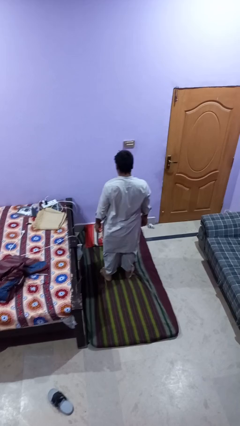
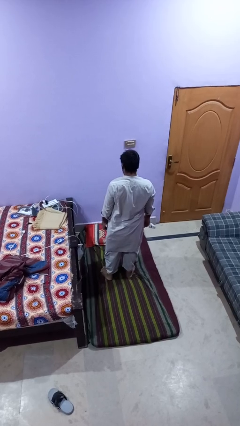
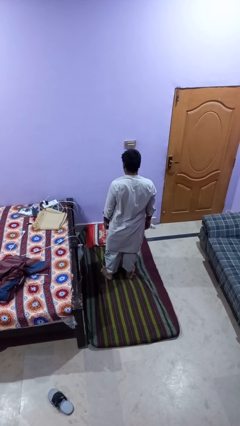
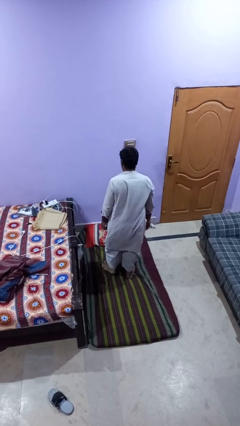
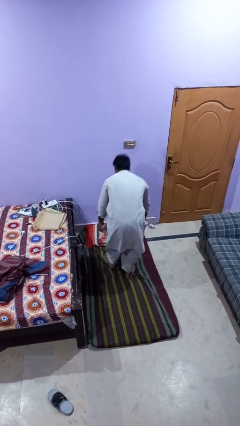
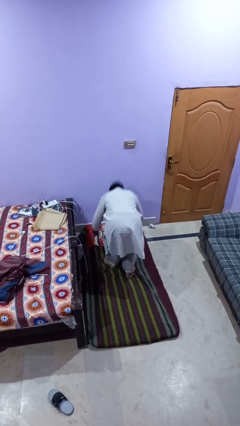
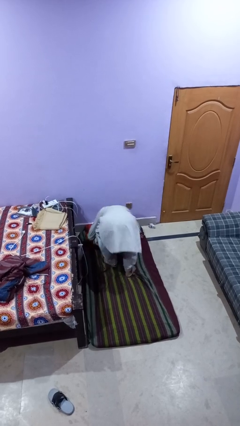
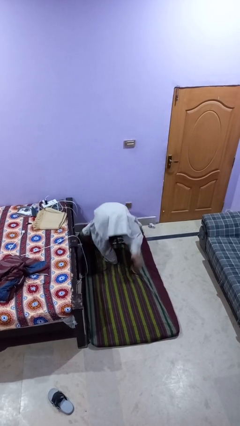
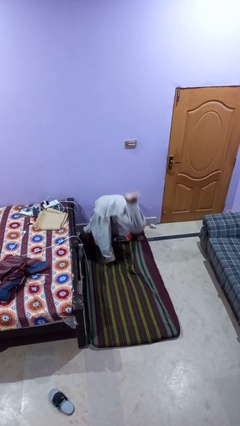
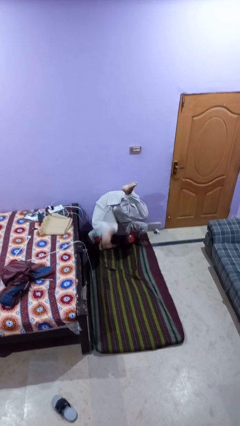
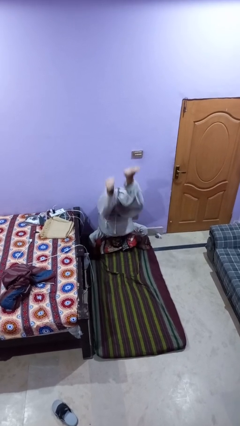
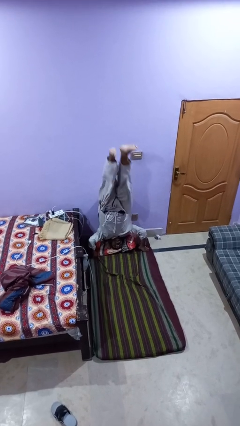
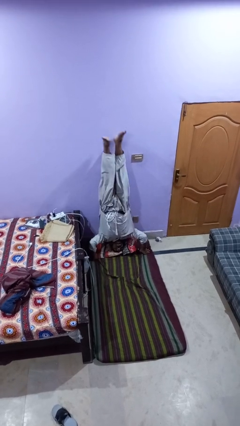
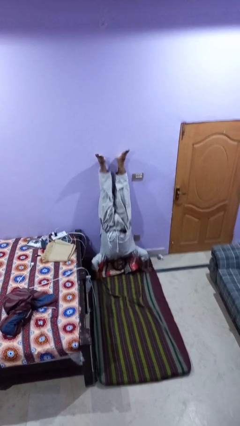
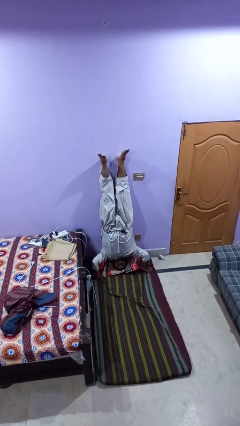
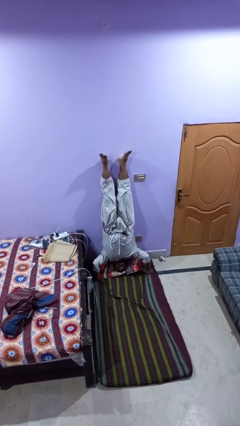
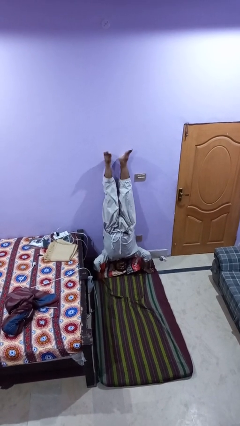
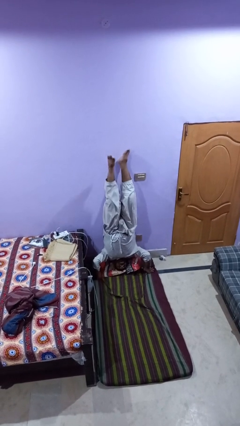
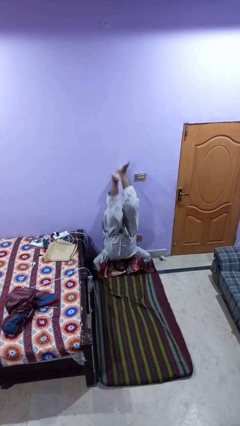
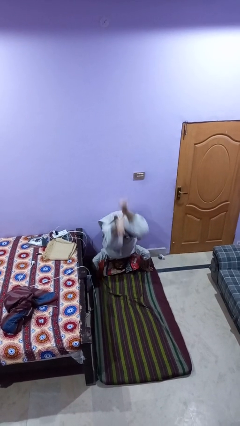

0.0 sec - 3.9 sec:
person handstand

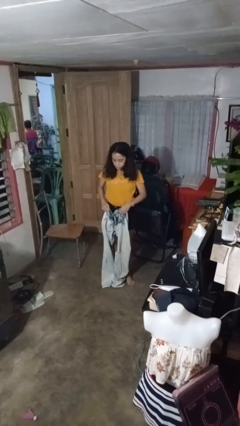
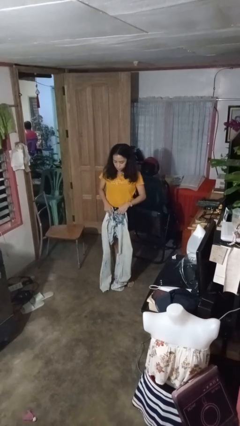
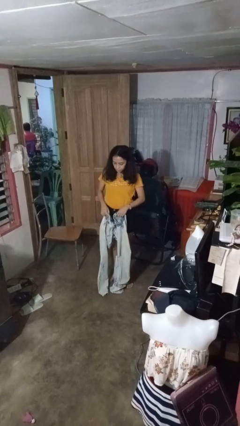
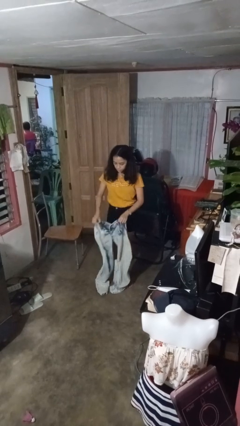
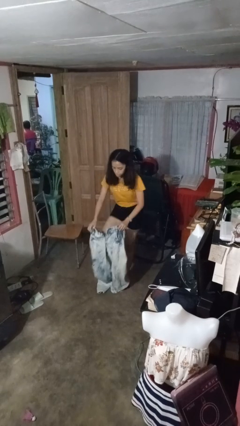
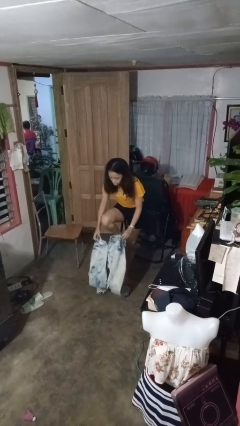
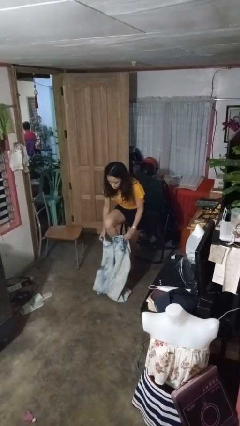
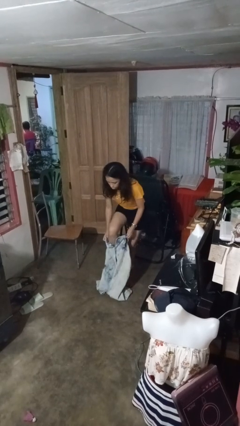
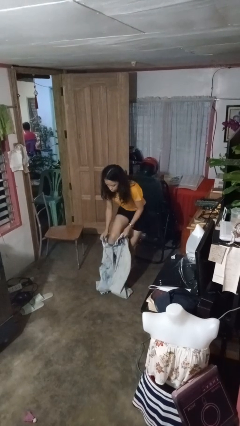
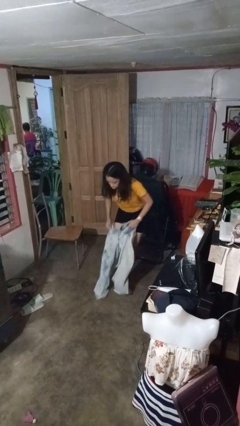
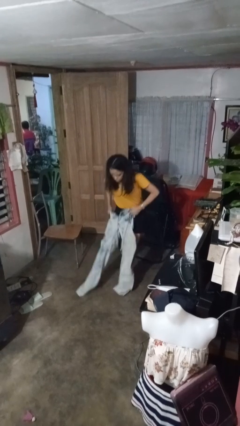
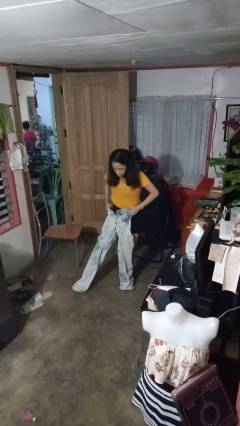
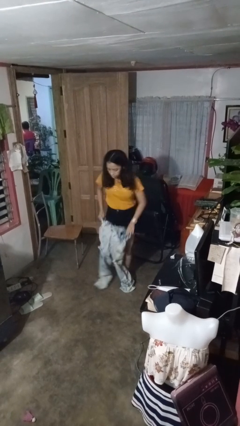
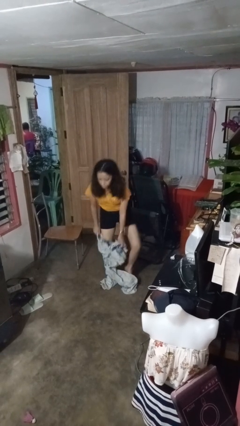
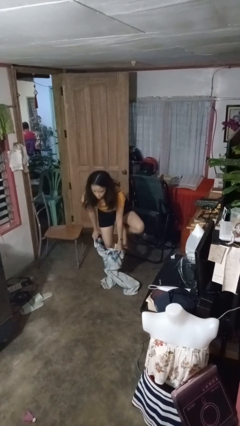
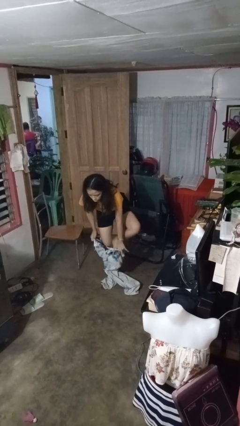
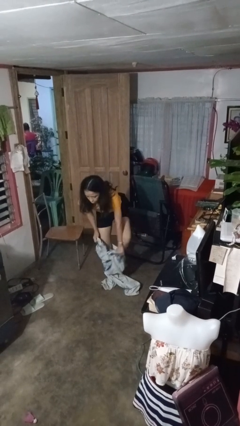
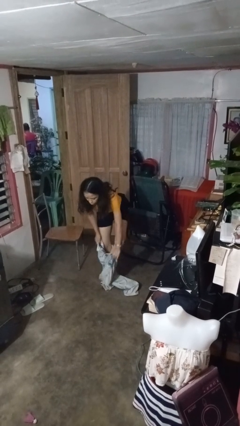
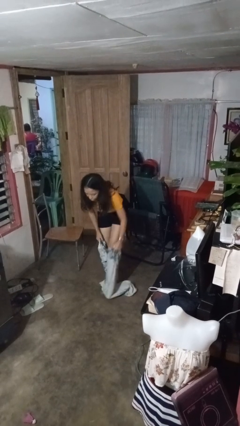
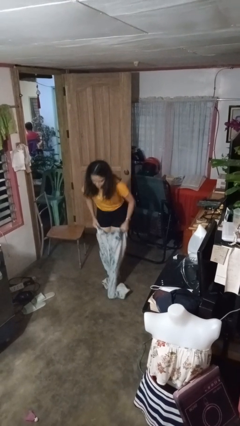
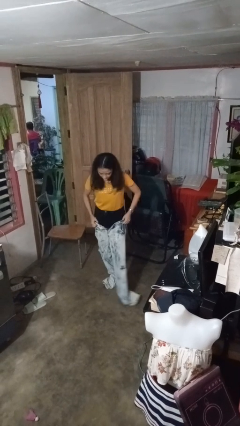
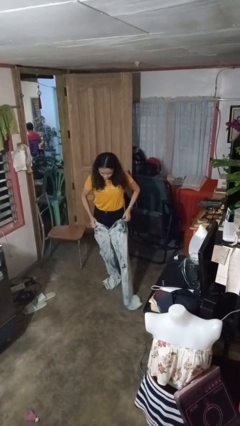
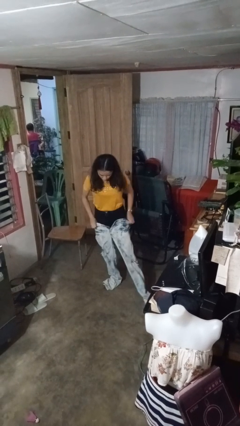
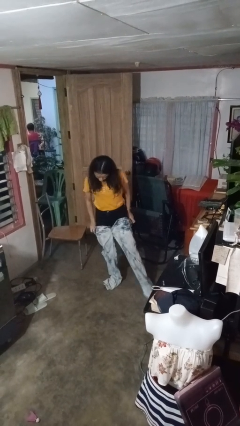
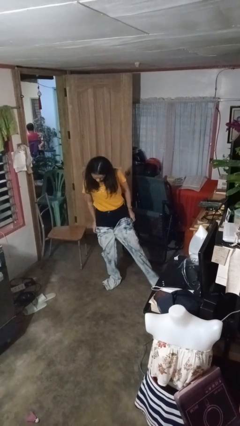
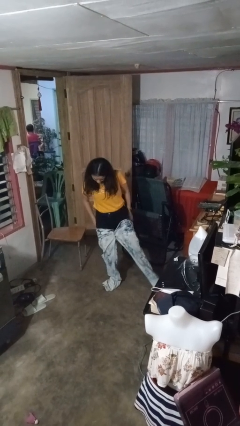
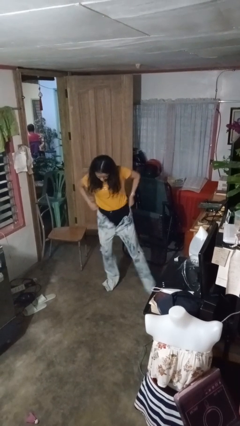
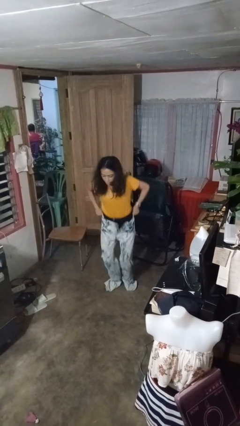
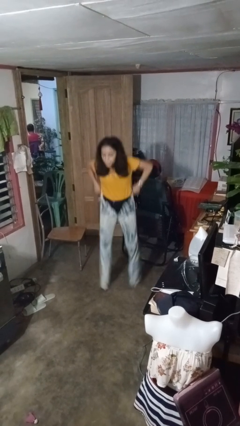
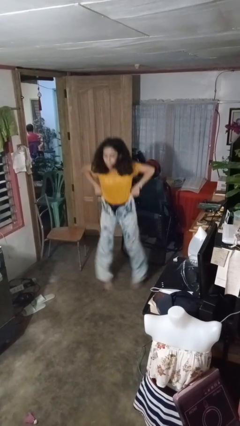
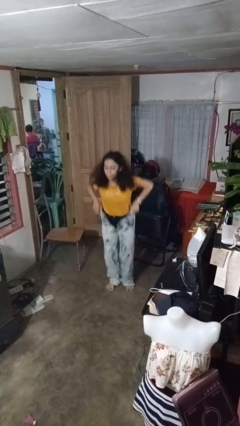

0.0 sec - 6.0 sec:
person puts on pants

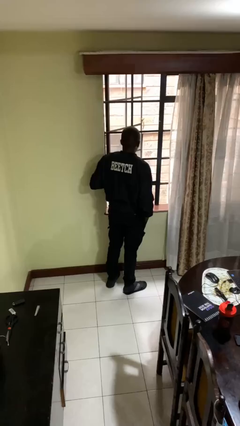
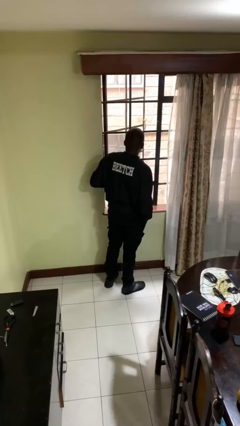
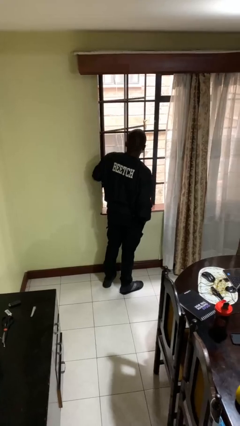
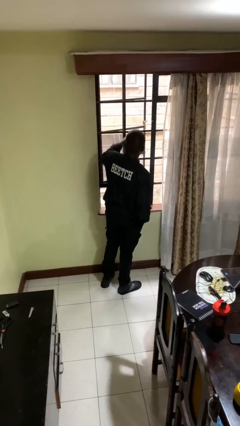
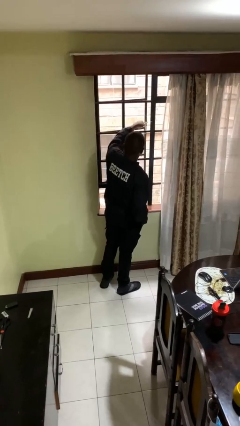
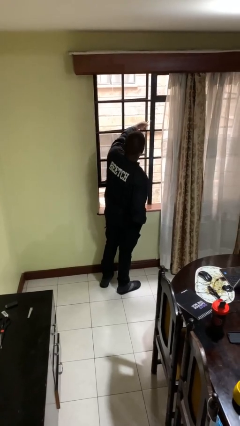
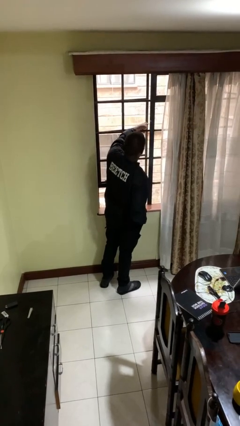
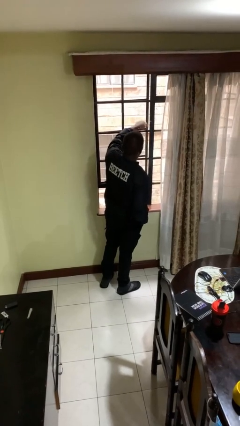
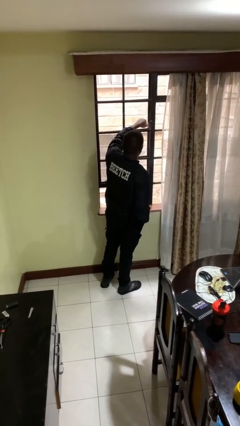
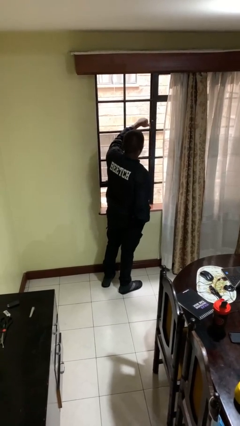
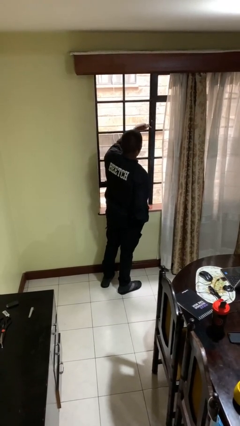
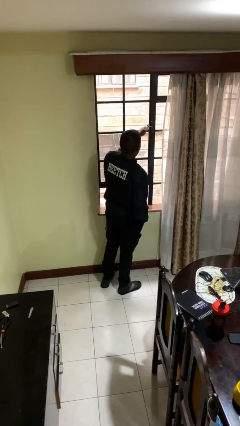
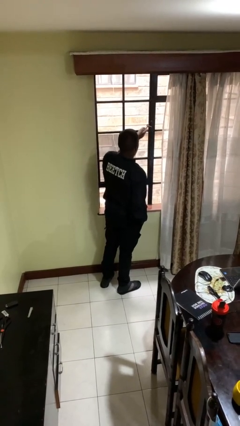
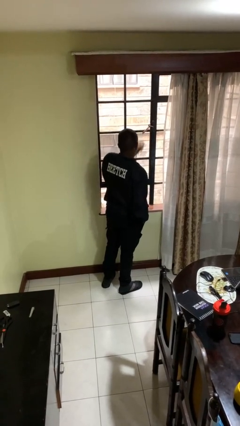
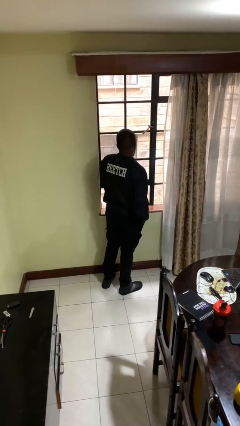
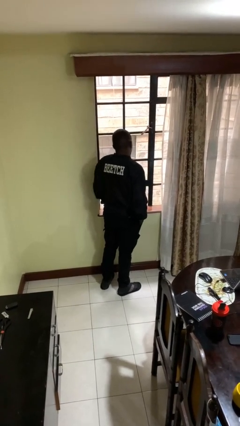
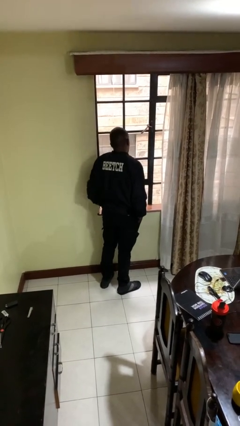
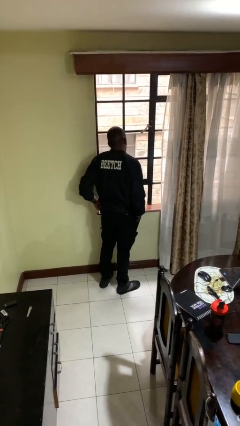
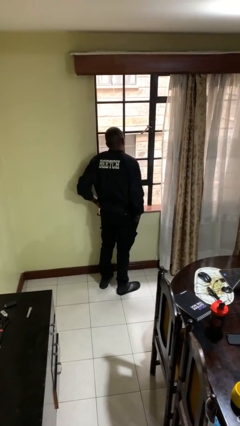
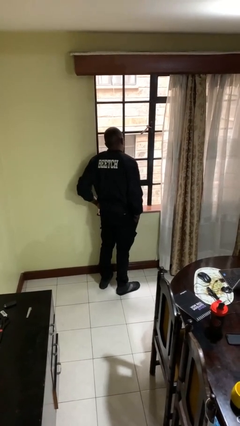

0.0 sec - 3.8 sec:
person closes home window

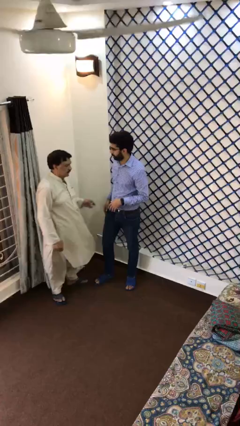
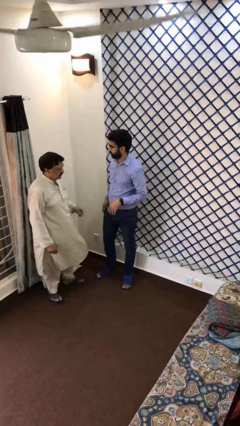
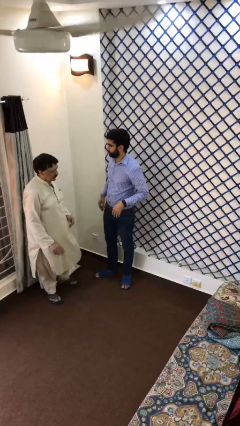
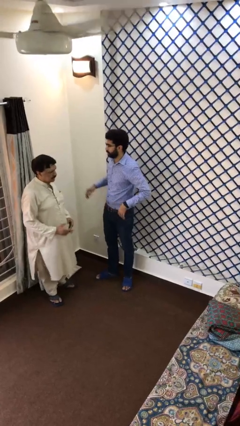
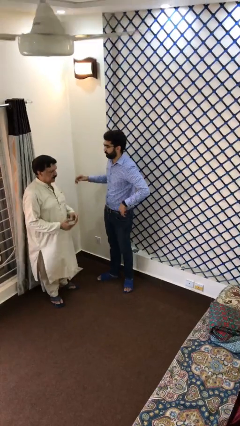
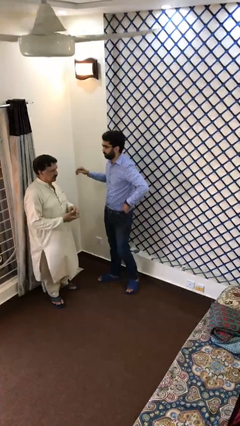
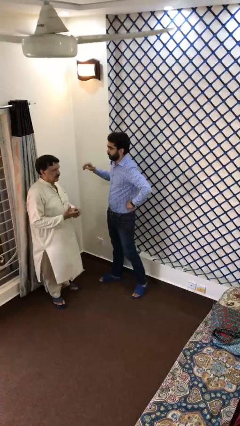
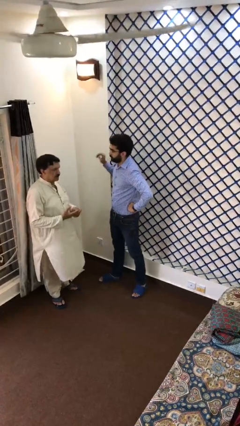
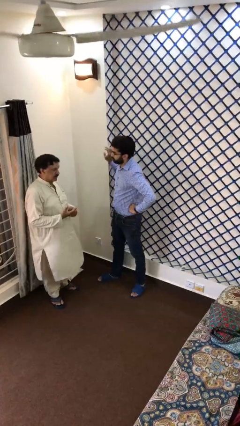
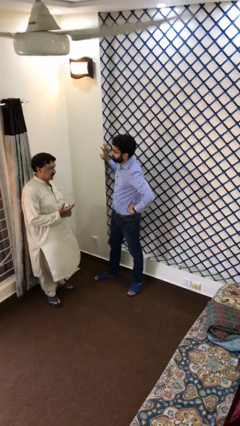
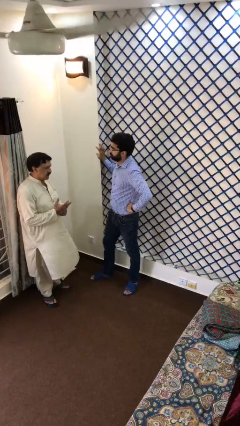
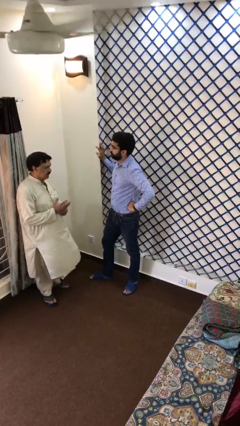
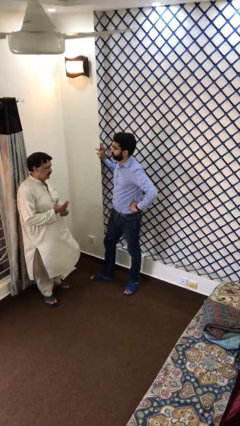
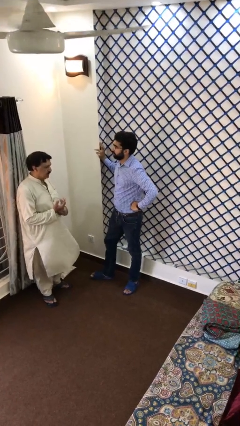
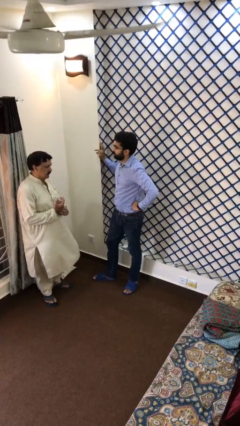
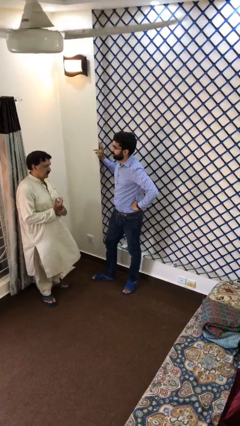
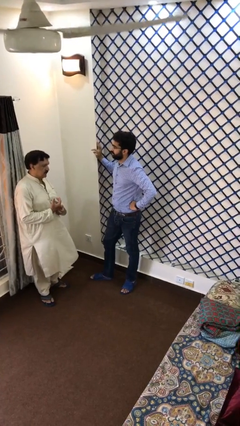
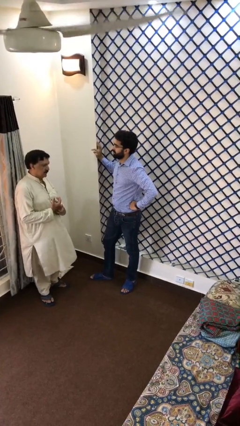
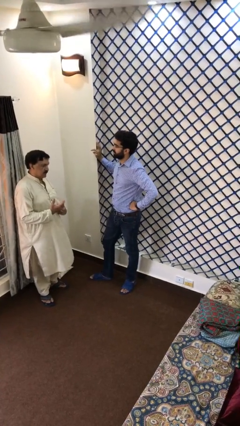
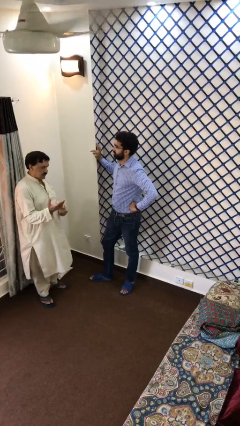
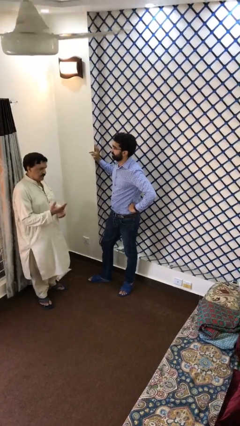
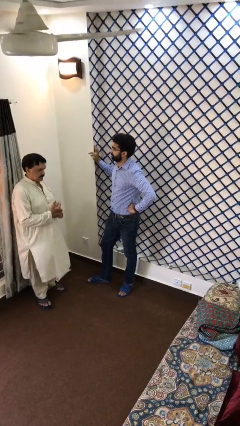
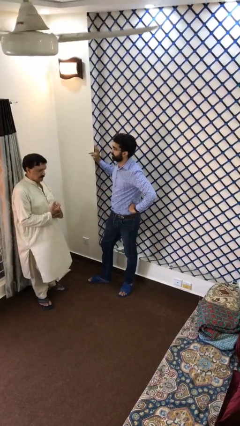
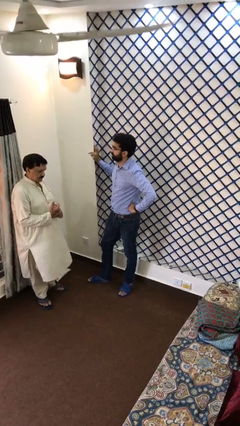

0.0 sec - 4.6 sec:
person talks to person
